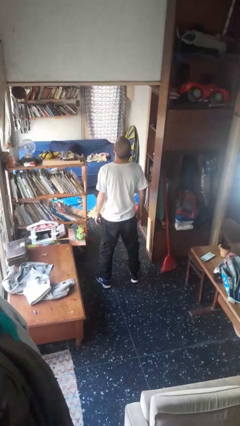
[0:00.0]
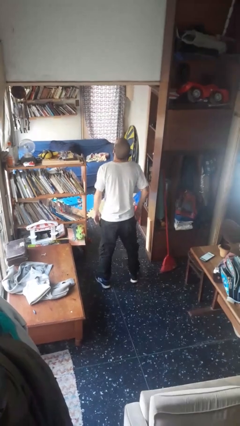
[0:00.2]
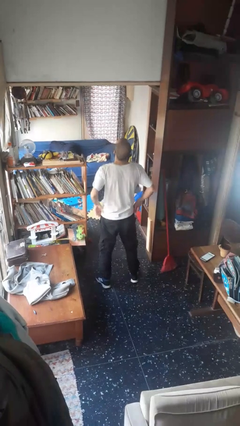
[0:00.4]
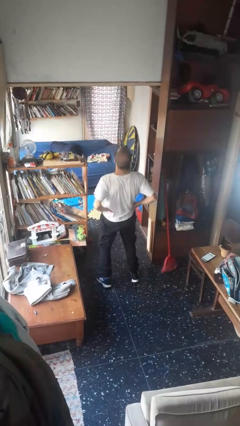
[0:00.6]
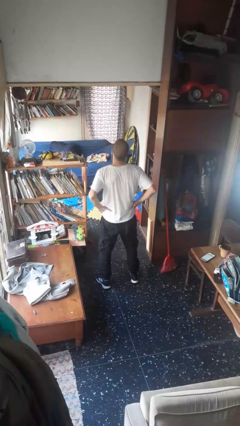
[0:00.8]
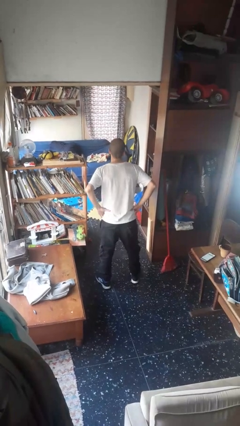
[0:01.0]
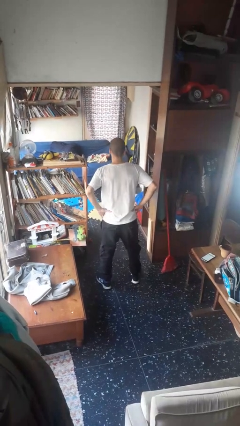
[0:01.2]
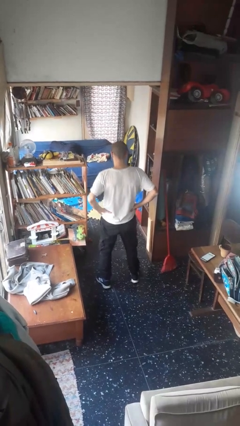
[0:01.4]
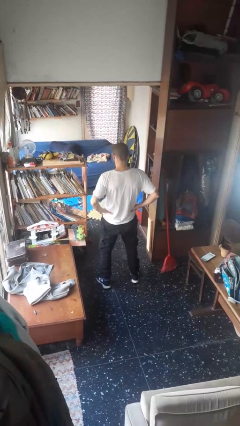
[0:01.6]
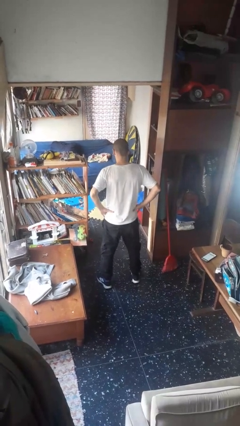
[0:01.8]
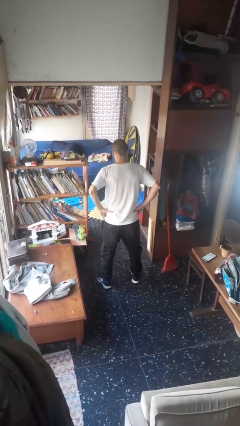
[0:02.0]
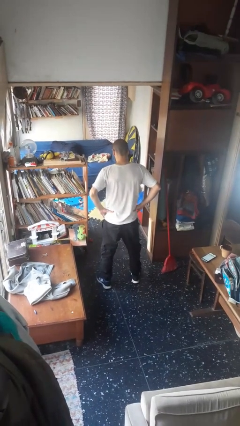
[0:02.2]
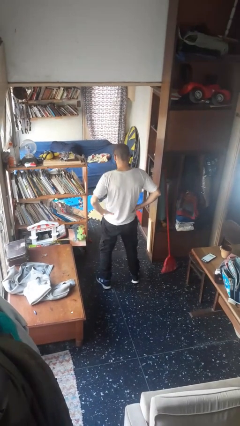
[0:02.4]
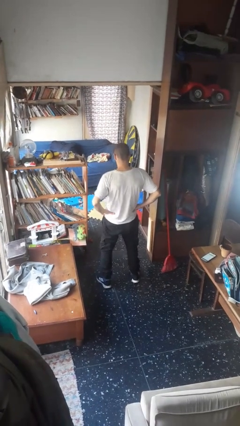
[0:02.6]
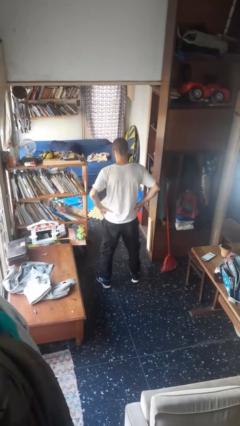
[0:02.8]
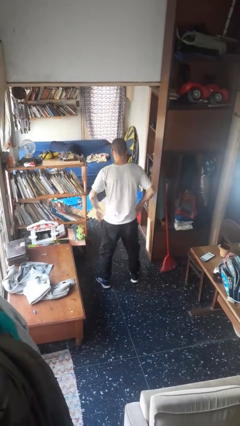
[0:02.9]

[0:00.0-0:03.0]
person wiggles hips

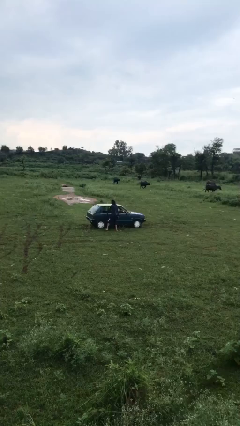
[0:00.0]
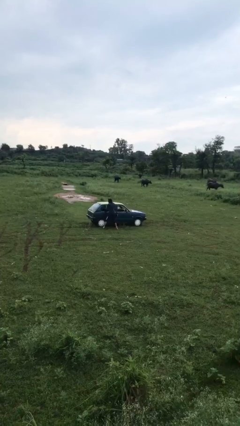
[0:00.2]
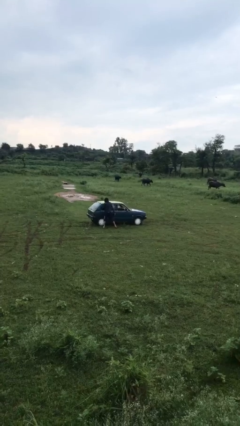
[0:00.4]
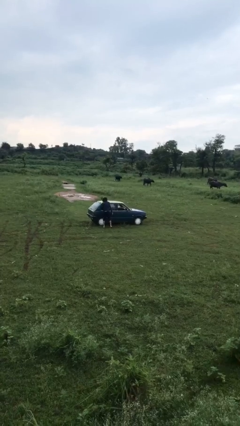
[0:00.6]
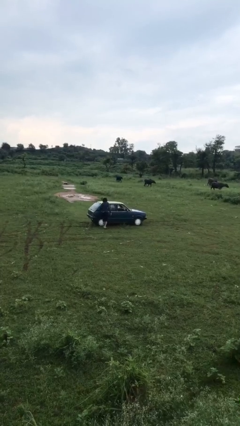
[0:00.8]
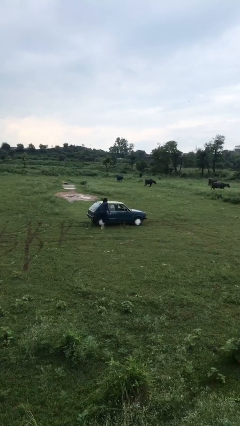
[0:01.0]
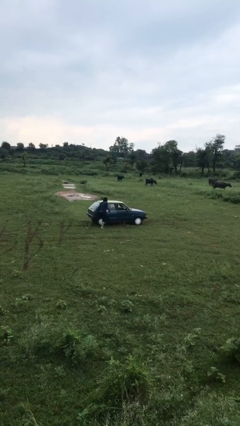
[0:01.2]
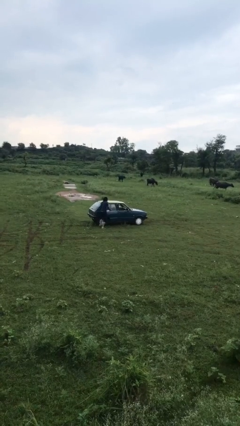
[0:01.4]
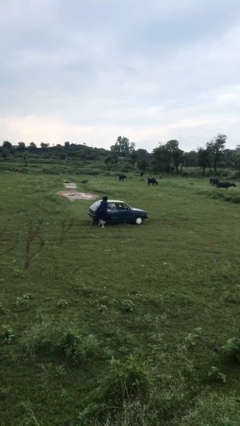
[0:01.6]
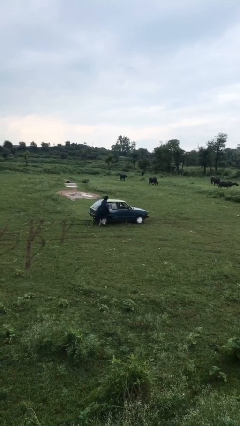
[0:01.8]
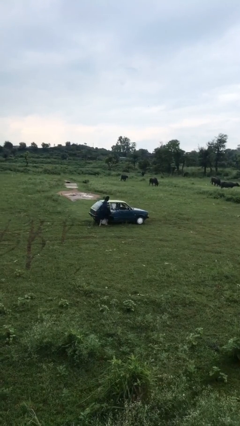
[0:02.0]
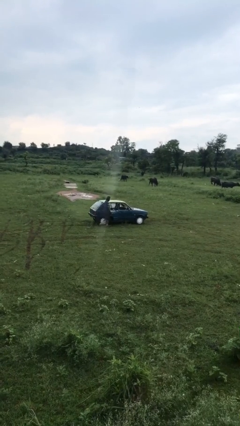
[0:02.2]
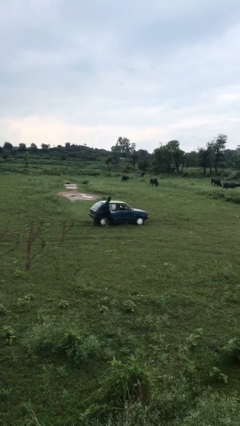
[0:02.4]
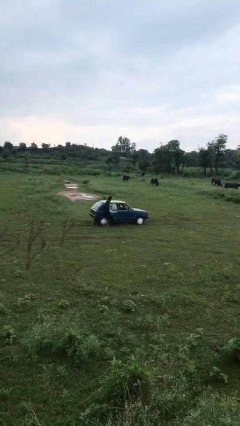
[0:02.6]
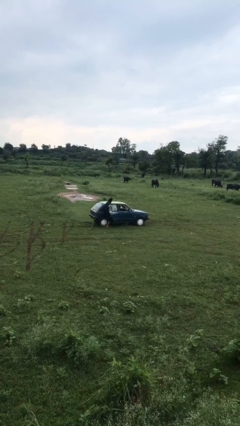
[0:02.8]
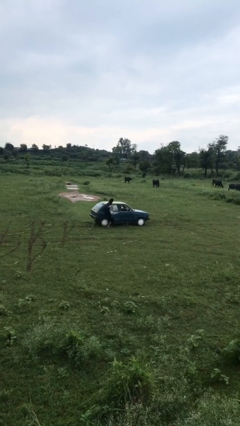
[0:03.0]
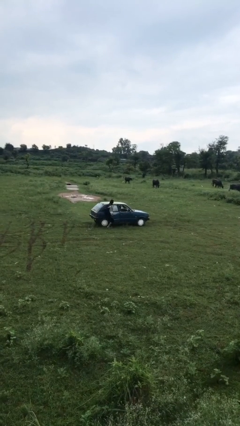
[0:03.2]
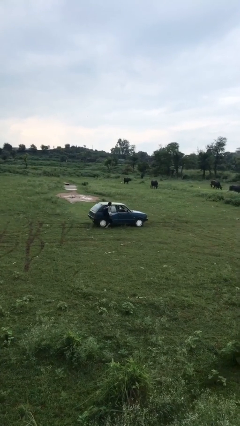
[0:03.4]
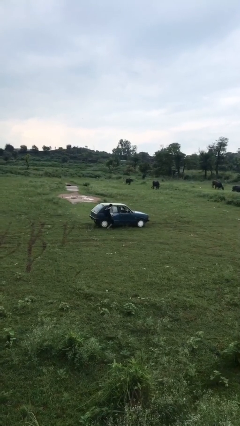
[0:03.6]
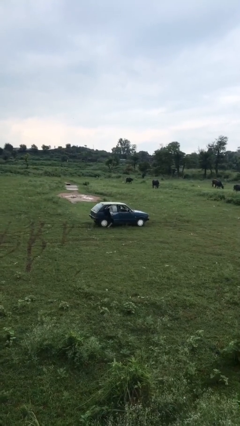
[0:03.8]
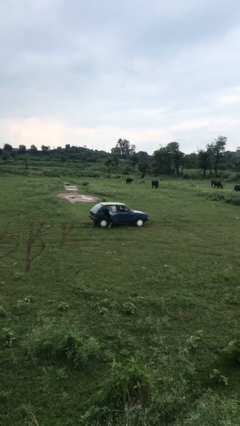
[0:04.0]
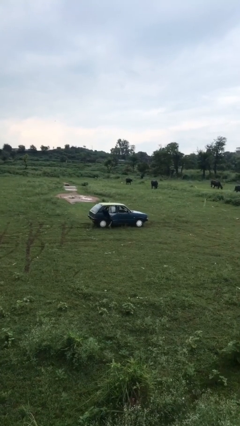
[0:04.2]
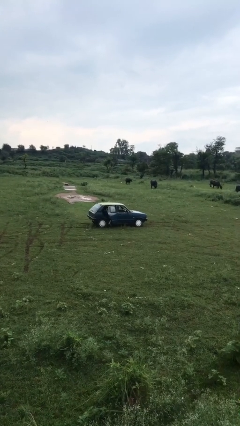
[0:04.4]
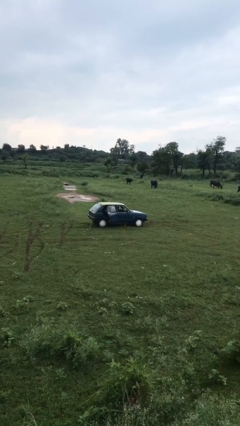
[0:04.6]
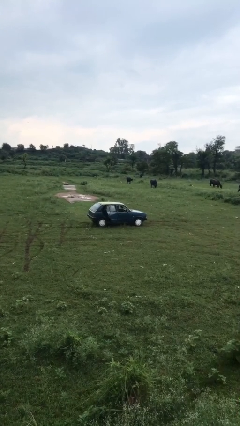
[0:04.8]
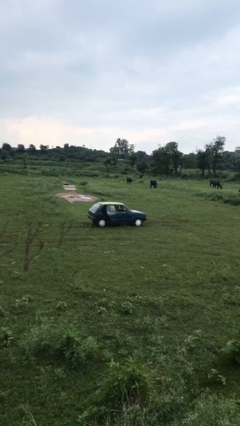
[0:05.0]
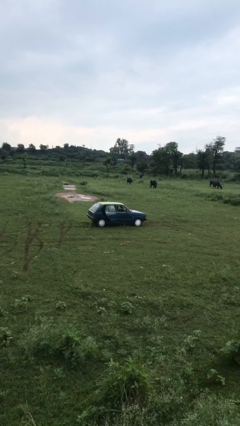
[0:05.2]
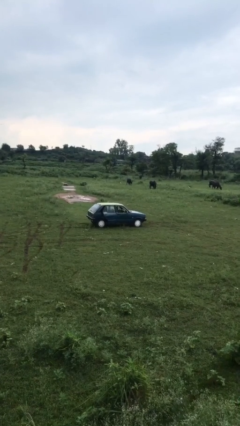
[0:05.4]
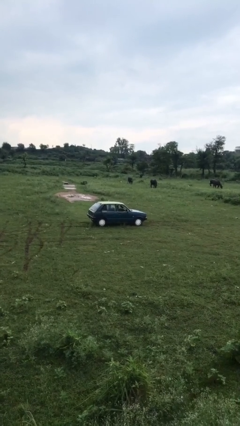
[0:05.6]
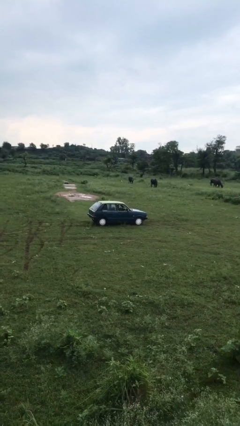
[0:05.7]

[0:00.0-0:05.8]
car picks up person

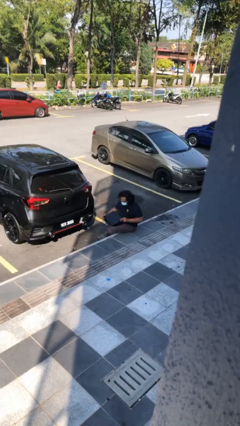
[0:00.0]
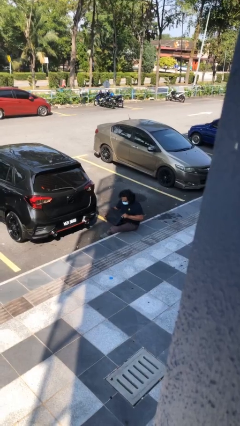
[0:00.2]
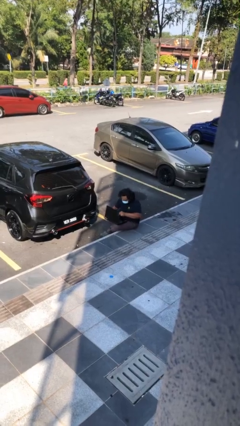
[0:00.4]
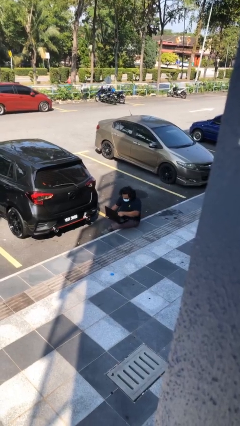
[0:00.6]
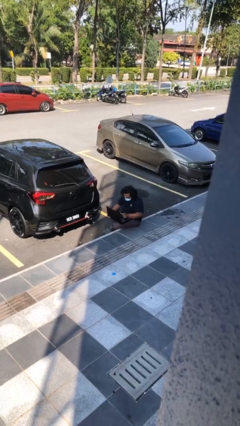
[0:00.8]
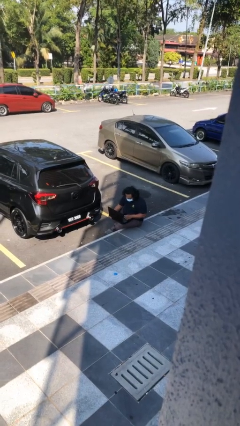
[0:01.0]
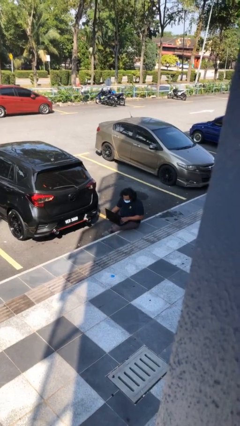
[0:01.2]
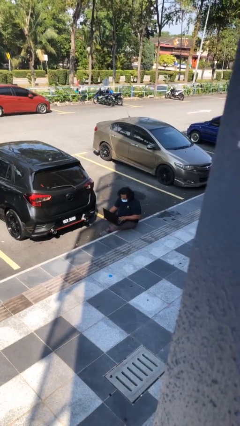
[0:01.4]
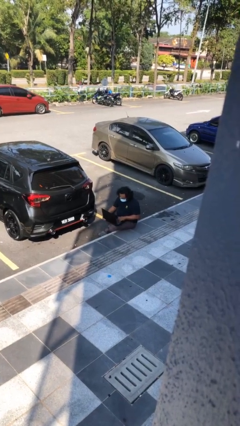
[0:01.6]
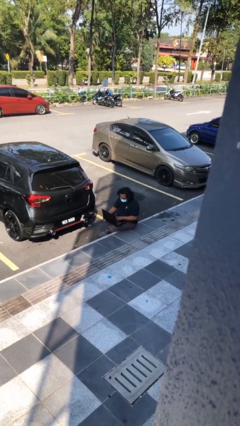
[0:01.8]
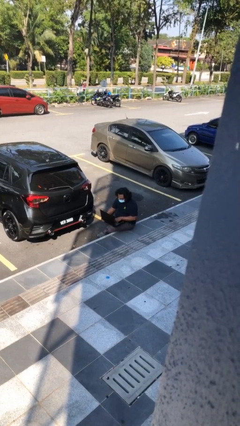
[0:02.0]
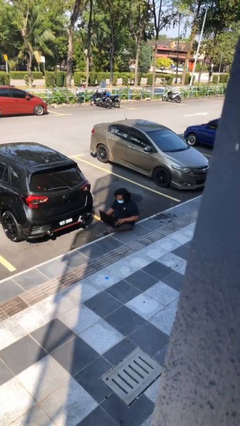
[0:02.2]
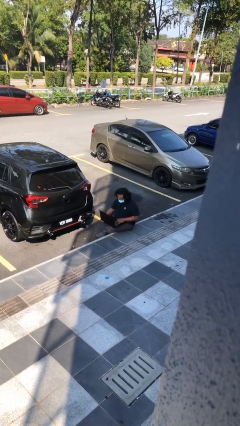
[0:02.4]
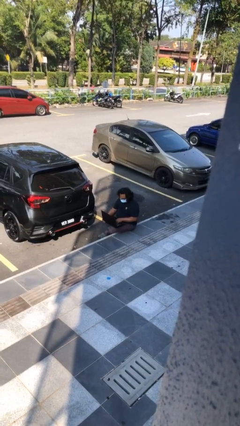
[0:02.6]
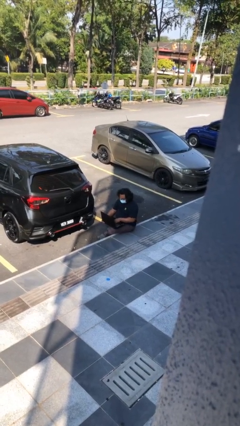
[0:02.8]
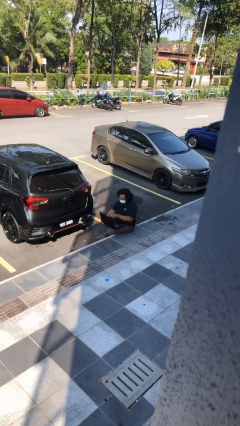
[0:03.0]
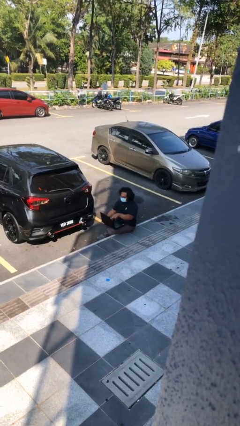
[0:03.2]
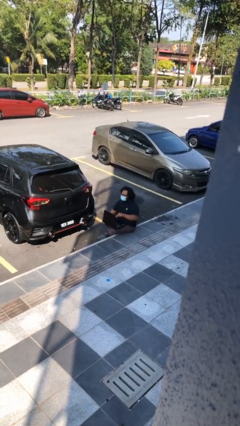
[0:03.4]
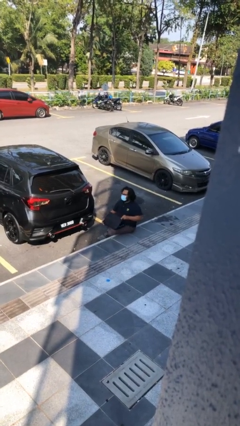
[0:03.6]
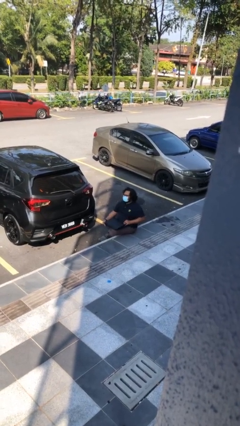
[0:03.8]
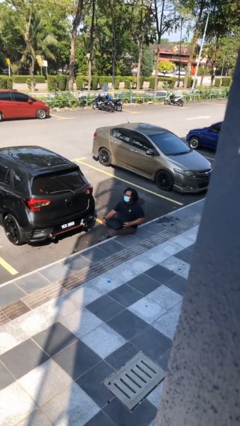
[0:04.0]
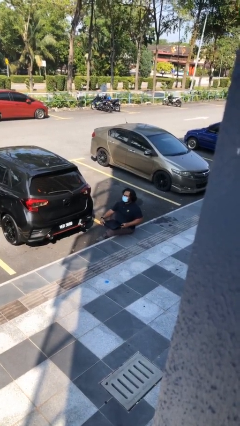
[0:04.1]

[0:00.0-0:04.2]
person interacts with laptop

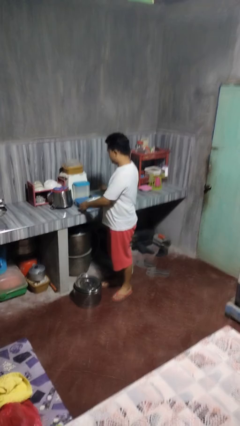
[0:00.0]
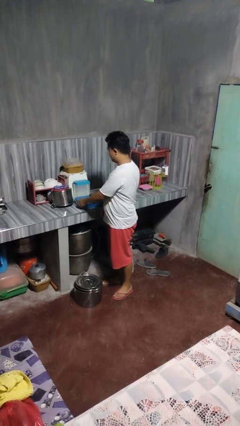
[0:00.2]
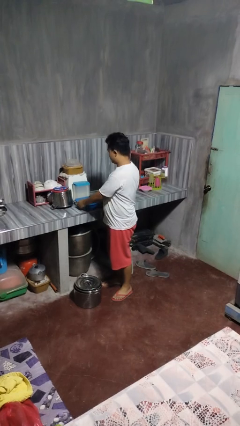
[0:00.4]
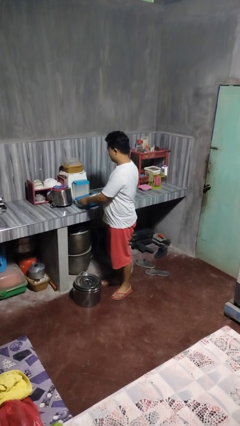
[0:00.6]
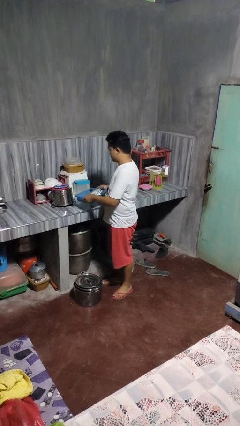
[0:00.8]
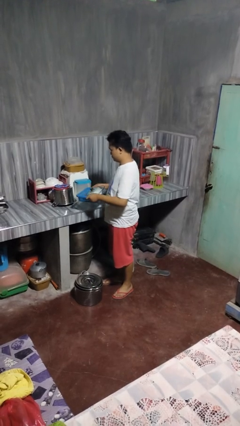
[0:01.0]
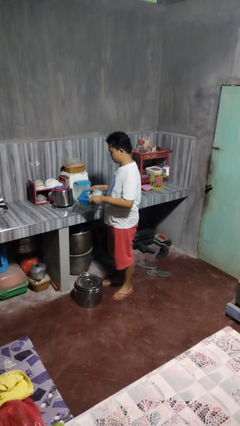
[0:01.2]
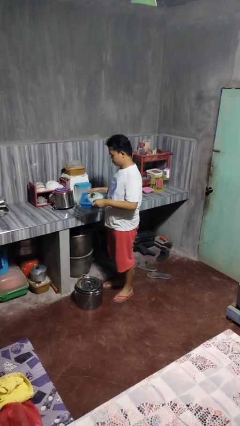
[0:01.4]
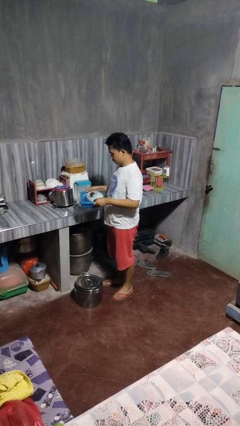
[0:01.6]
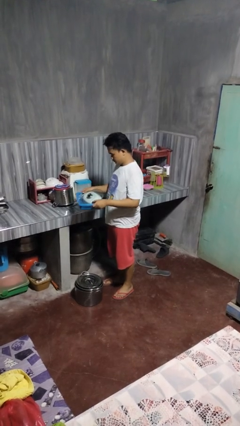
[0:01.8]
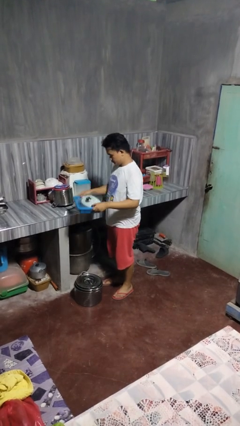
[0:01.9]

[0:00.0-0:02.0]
person picks up object from countertop

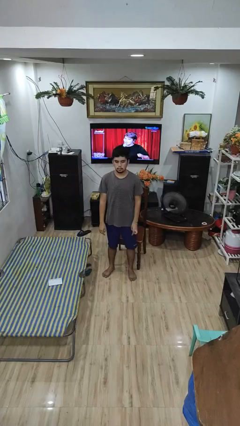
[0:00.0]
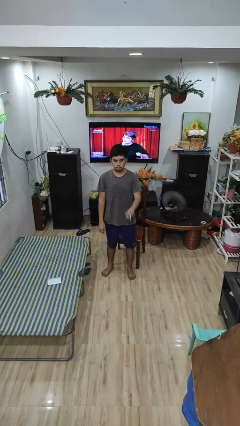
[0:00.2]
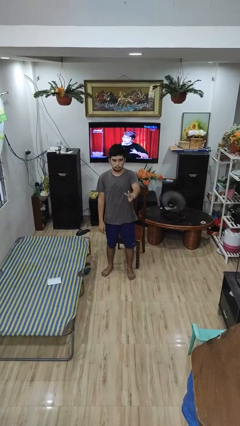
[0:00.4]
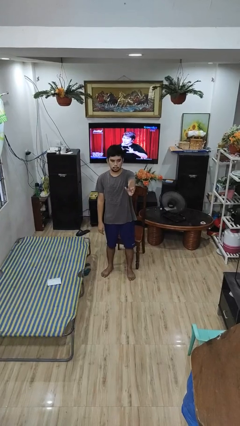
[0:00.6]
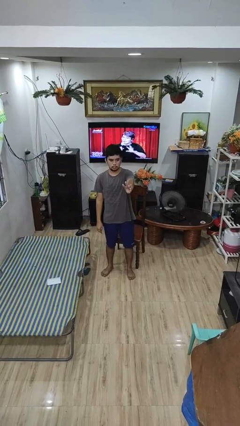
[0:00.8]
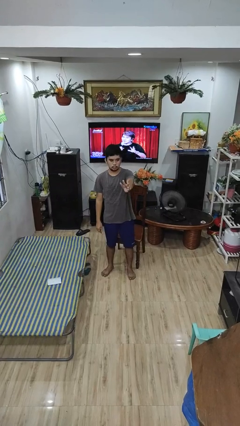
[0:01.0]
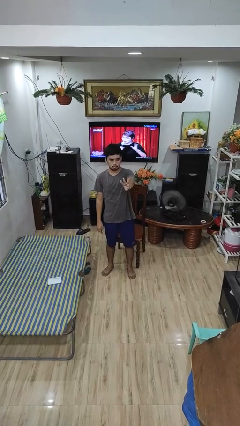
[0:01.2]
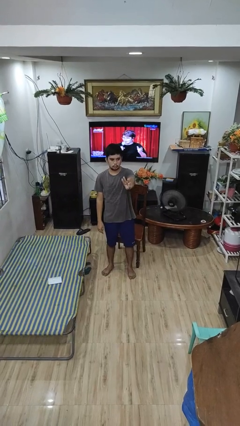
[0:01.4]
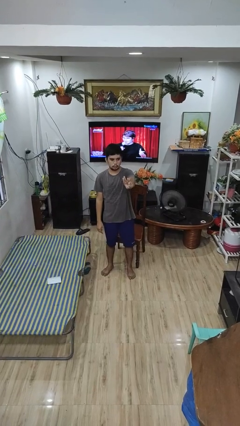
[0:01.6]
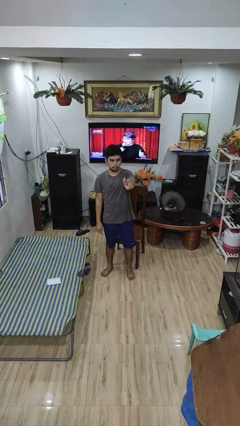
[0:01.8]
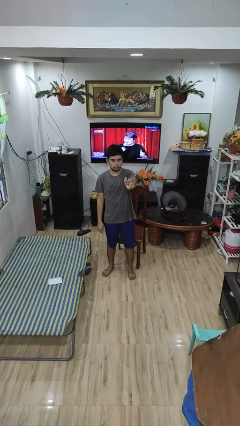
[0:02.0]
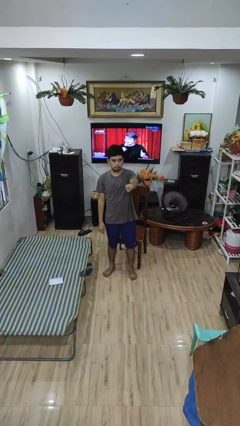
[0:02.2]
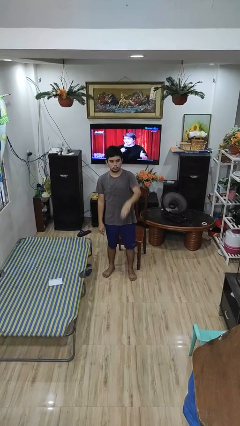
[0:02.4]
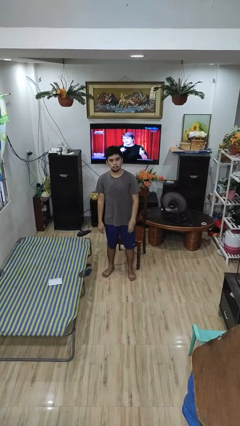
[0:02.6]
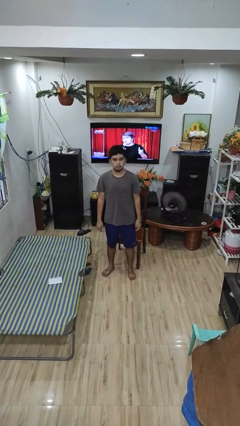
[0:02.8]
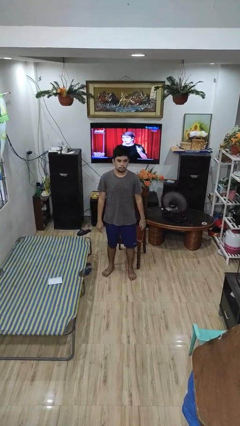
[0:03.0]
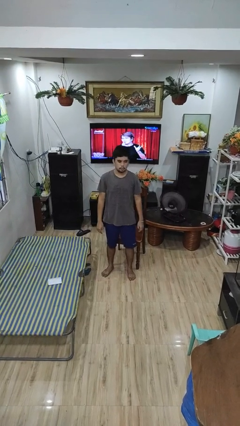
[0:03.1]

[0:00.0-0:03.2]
person gestures number three
